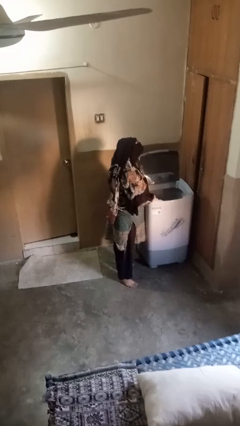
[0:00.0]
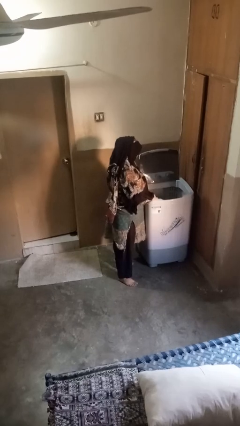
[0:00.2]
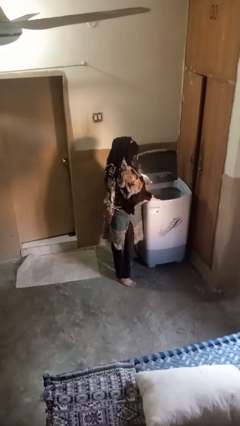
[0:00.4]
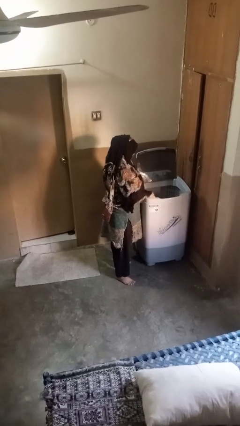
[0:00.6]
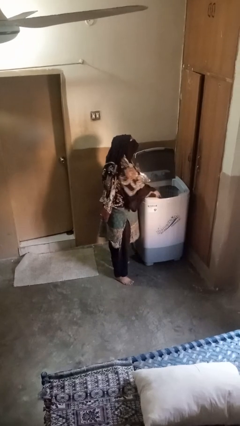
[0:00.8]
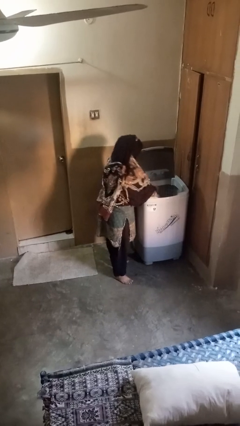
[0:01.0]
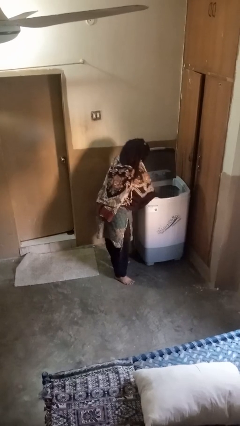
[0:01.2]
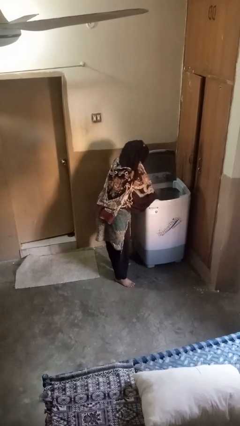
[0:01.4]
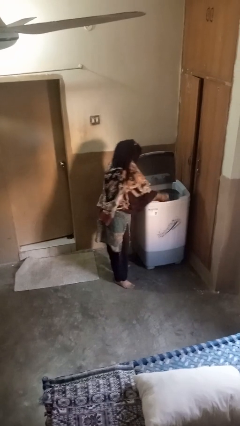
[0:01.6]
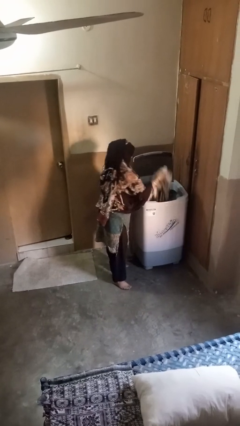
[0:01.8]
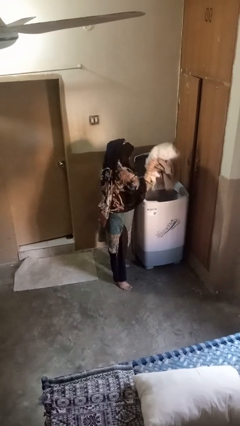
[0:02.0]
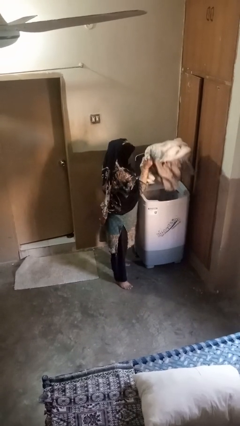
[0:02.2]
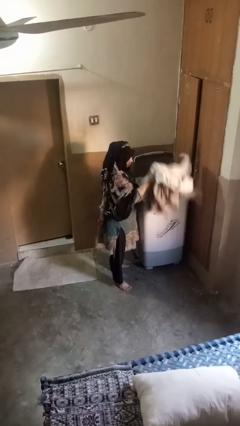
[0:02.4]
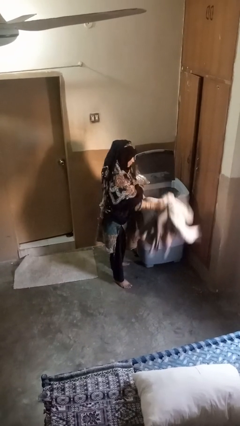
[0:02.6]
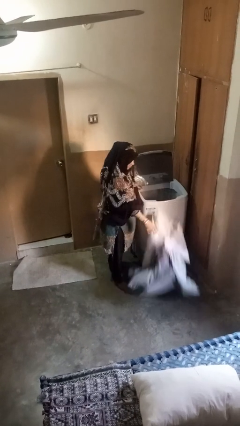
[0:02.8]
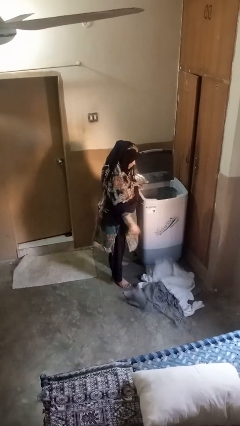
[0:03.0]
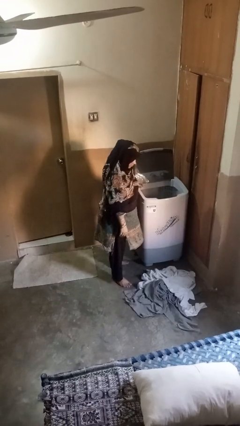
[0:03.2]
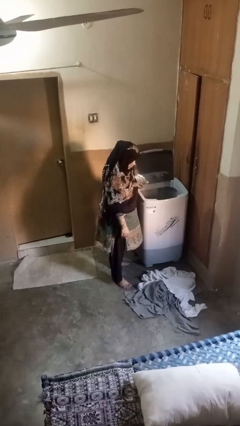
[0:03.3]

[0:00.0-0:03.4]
person unloads clotheswasher

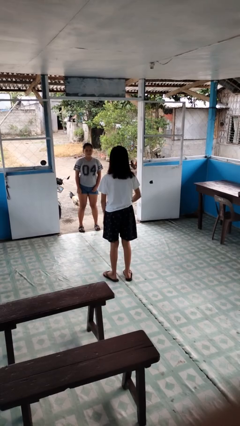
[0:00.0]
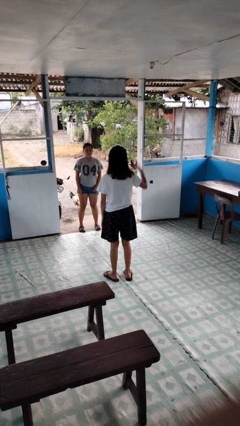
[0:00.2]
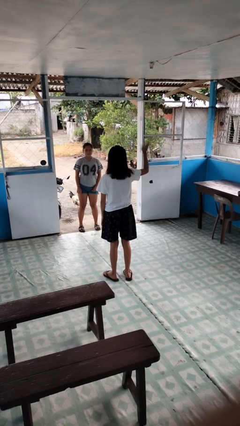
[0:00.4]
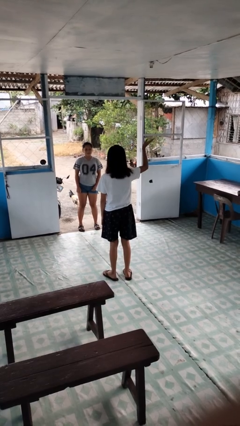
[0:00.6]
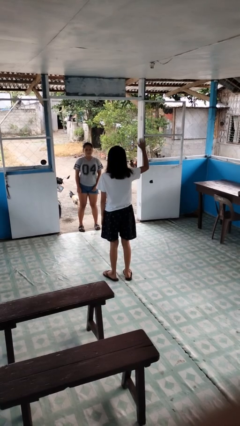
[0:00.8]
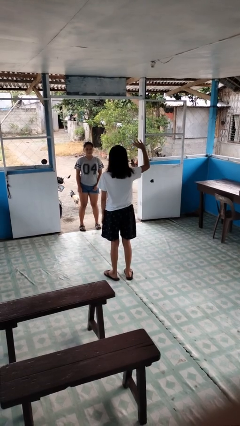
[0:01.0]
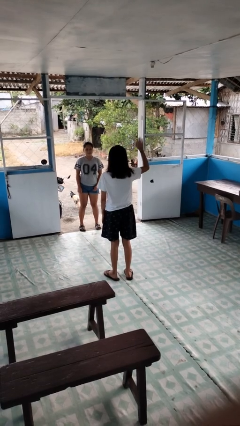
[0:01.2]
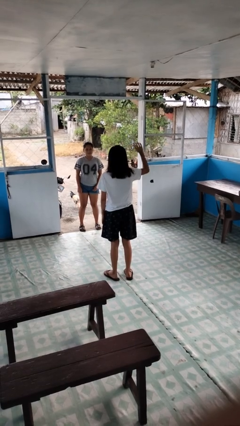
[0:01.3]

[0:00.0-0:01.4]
person waves at person

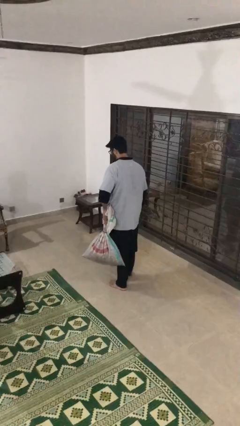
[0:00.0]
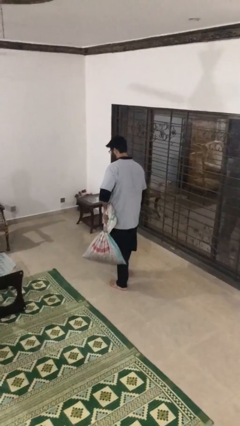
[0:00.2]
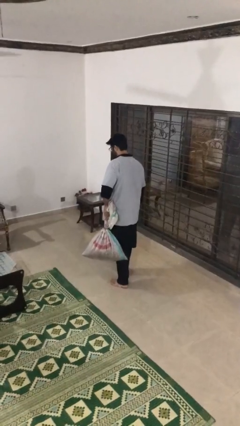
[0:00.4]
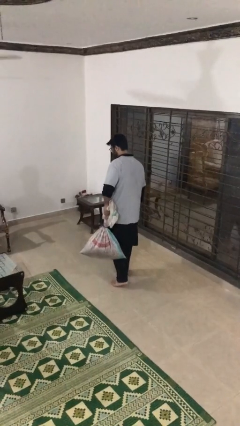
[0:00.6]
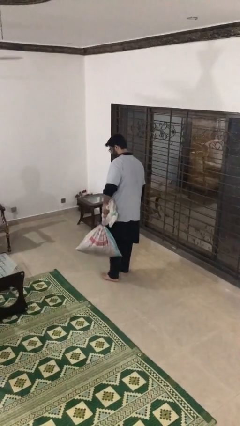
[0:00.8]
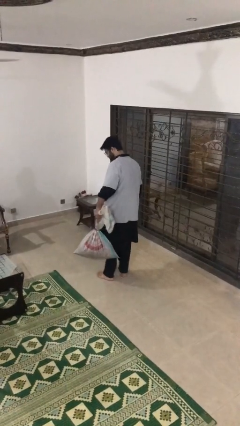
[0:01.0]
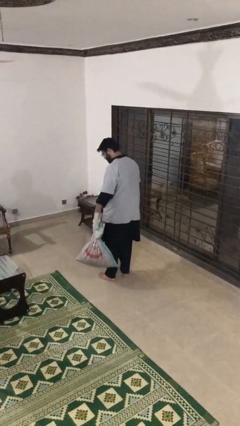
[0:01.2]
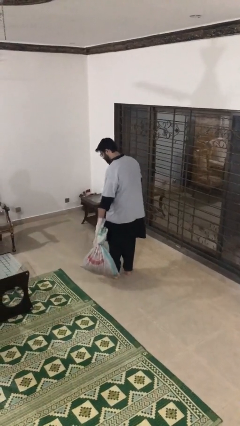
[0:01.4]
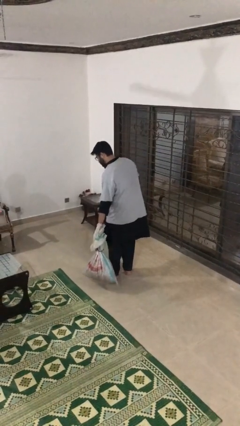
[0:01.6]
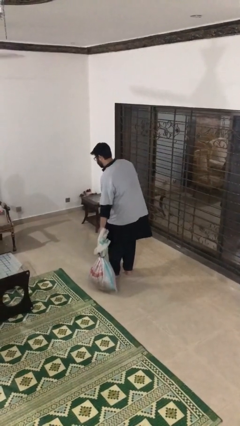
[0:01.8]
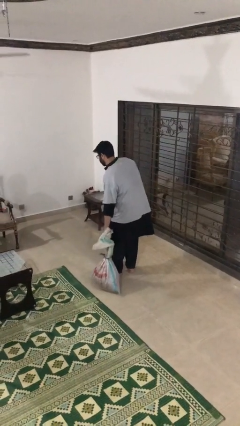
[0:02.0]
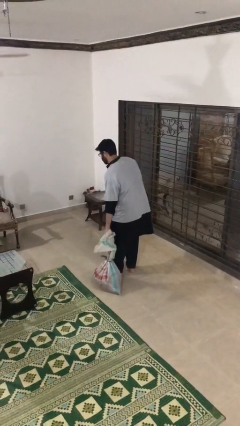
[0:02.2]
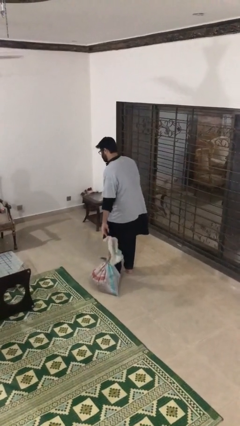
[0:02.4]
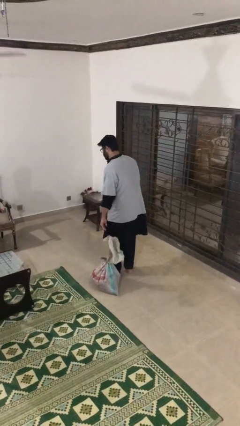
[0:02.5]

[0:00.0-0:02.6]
person puts down object on floor

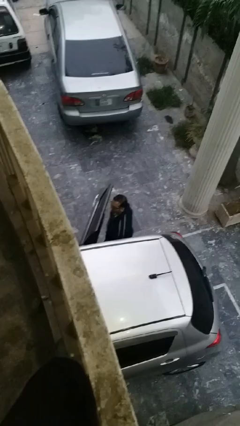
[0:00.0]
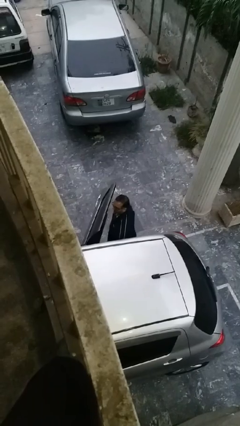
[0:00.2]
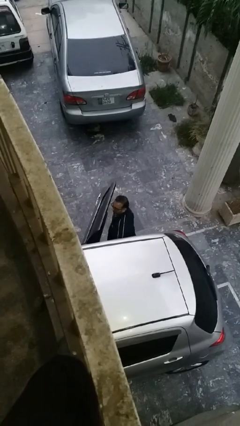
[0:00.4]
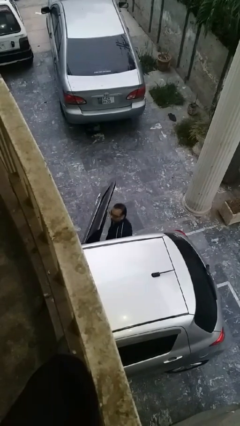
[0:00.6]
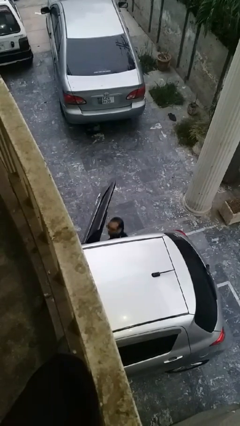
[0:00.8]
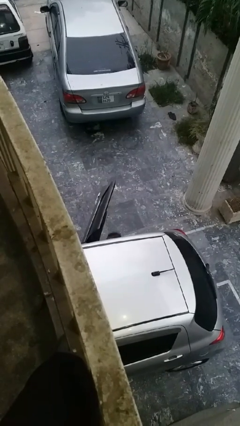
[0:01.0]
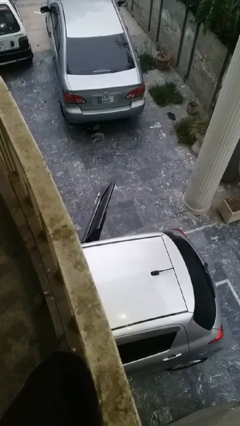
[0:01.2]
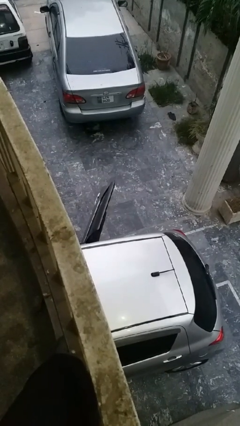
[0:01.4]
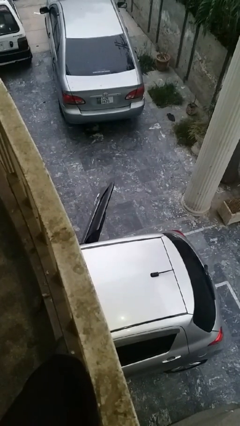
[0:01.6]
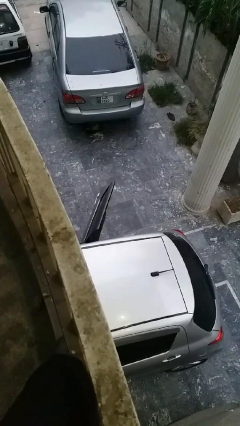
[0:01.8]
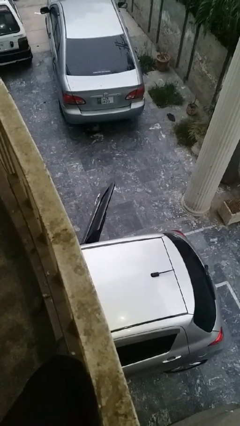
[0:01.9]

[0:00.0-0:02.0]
person enters car

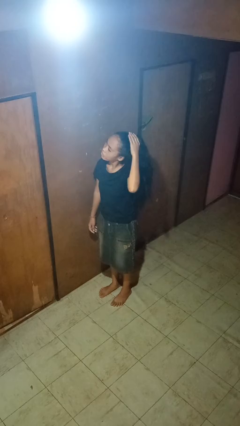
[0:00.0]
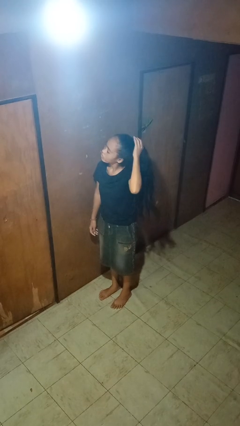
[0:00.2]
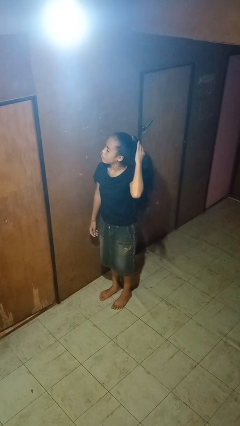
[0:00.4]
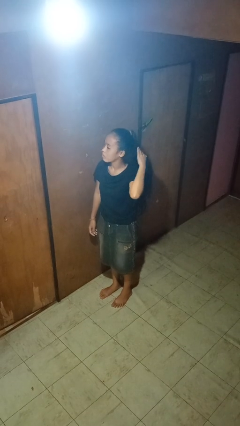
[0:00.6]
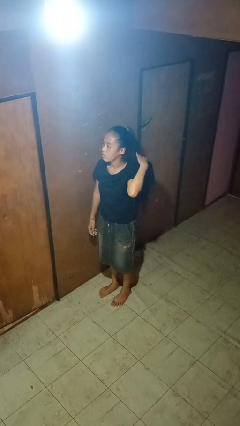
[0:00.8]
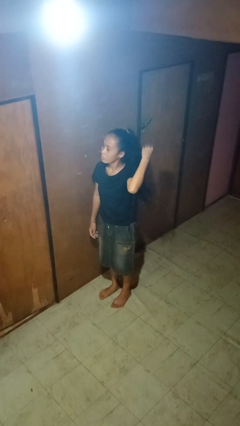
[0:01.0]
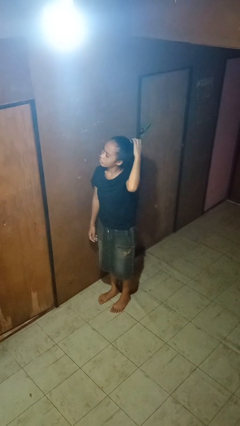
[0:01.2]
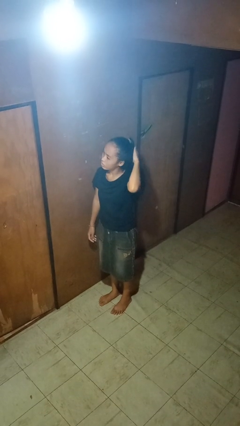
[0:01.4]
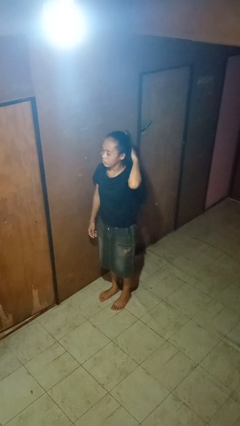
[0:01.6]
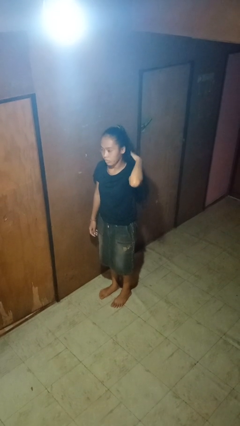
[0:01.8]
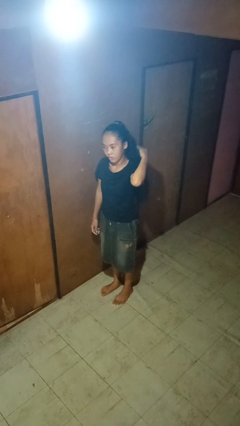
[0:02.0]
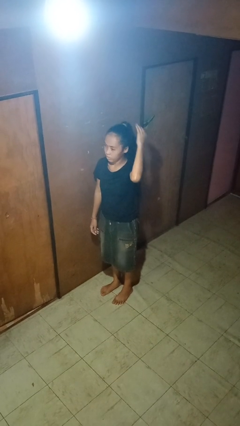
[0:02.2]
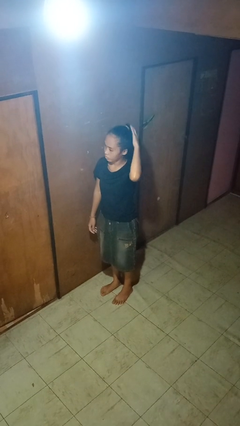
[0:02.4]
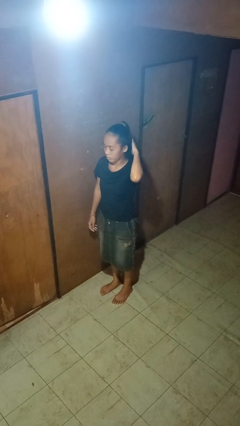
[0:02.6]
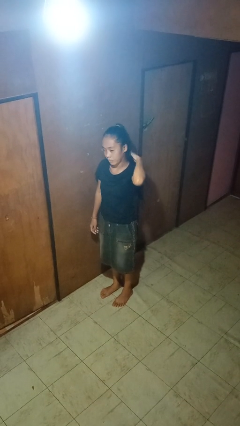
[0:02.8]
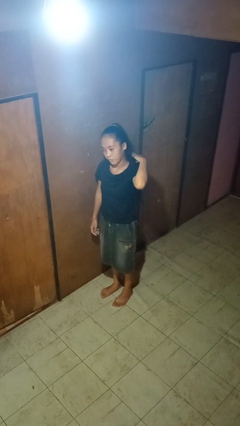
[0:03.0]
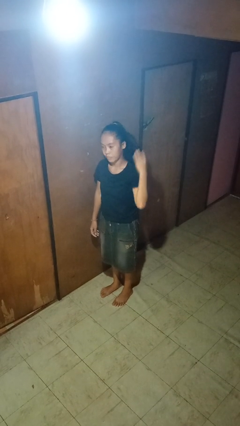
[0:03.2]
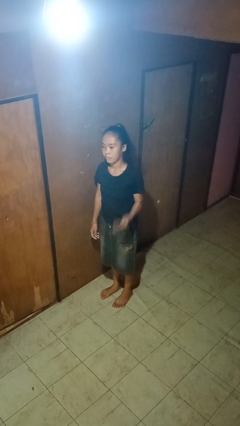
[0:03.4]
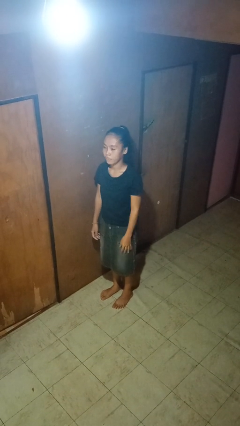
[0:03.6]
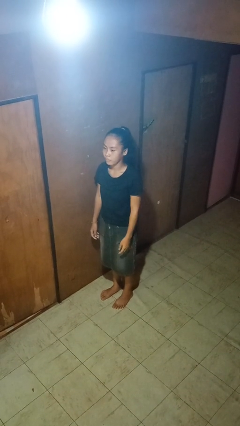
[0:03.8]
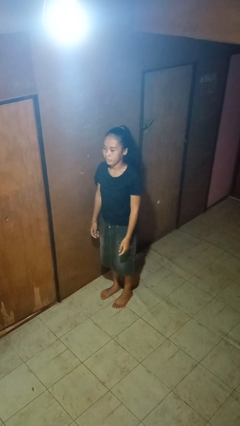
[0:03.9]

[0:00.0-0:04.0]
person strokes hair

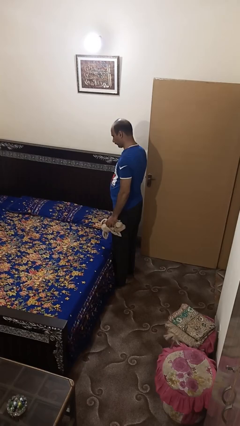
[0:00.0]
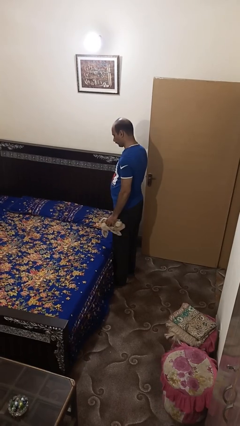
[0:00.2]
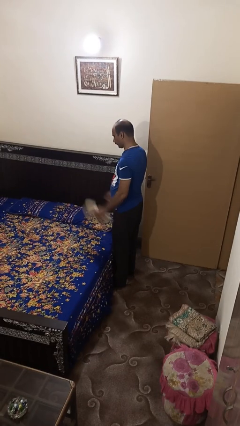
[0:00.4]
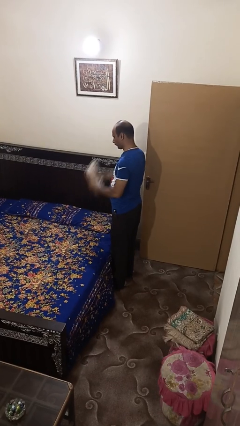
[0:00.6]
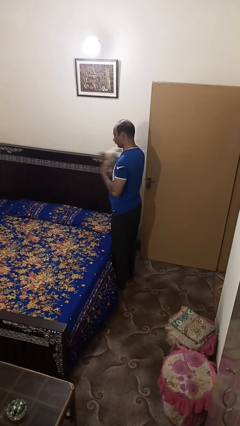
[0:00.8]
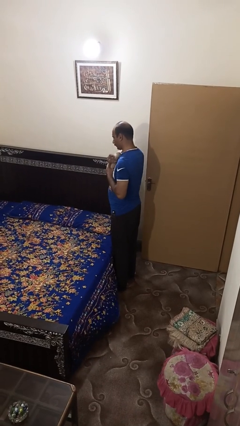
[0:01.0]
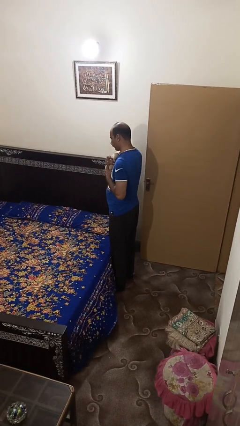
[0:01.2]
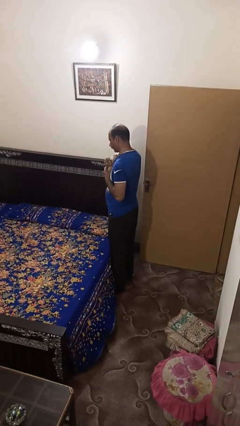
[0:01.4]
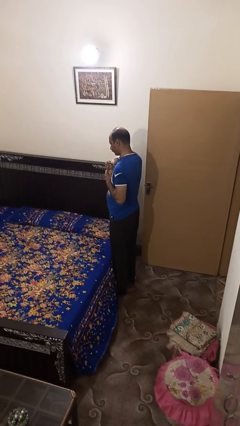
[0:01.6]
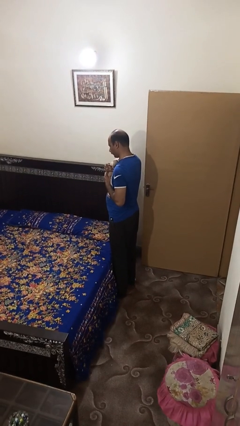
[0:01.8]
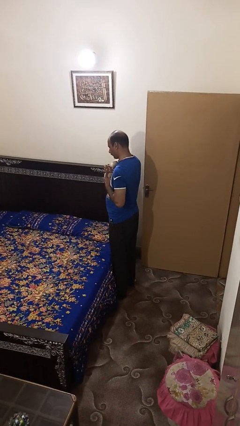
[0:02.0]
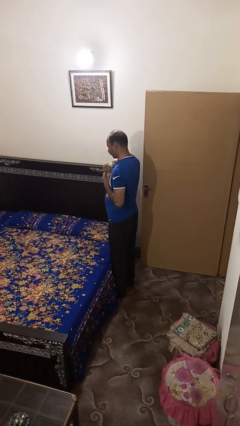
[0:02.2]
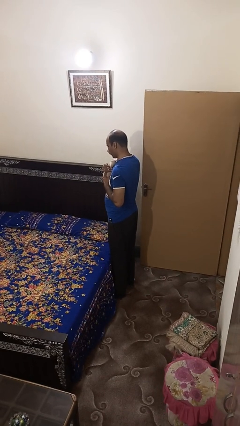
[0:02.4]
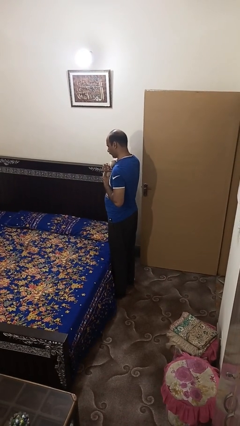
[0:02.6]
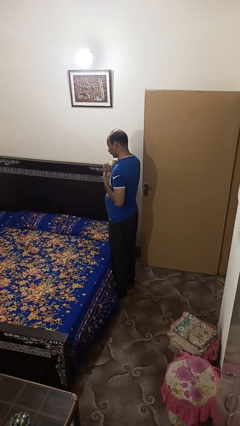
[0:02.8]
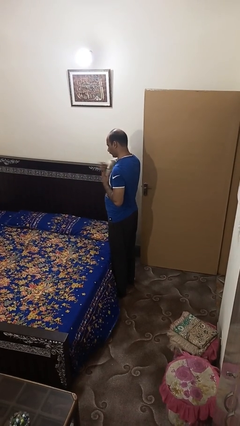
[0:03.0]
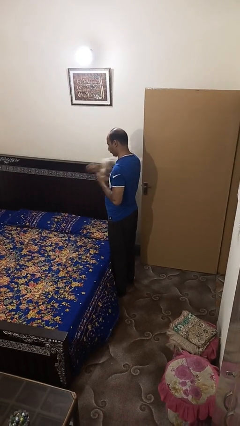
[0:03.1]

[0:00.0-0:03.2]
person hugs stuffed animal

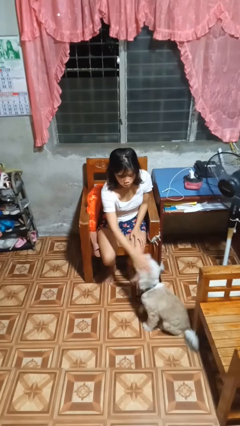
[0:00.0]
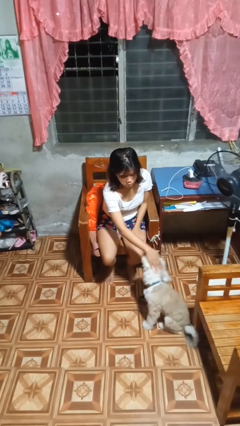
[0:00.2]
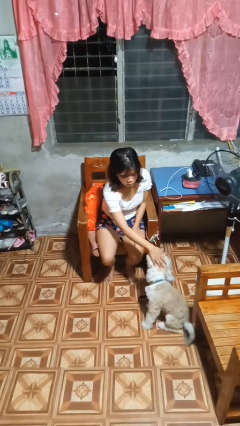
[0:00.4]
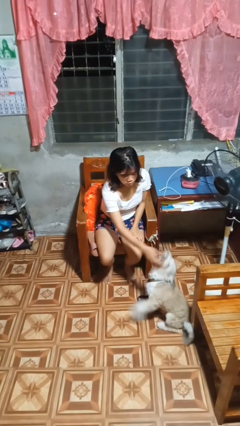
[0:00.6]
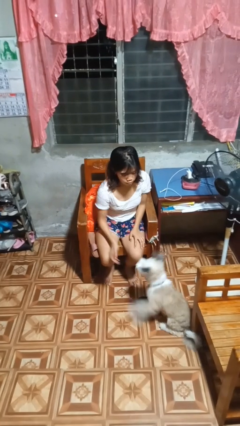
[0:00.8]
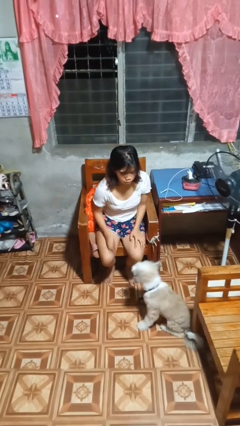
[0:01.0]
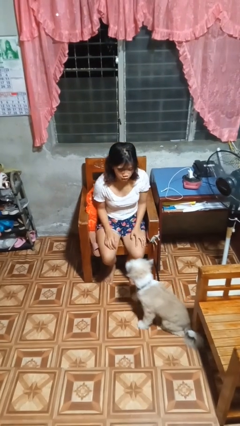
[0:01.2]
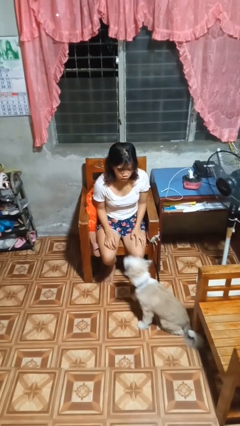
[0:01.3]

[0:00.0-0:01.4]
person pets dog
